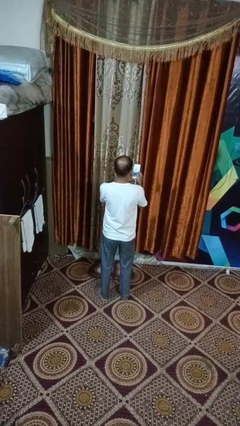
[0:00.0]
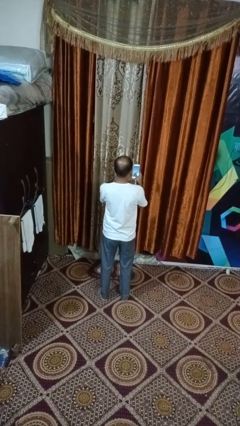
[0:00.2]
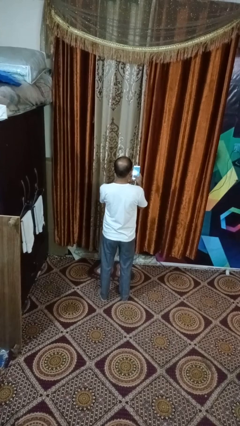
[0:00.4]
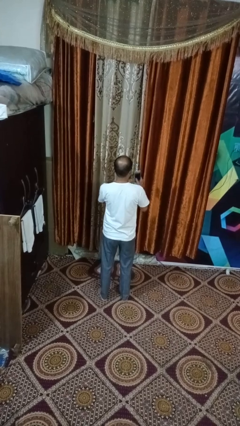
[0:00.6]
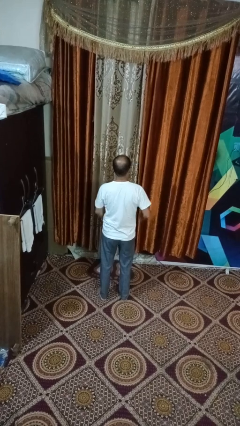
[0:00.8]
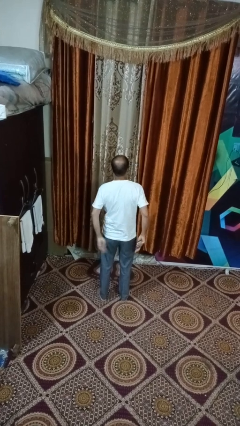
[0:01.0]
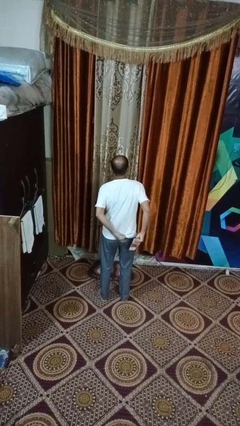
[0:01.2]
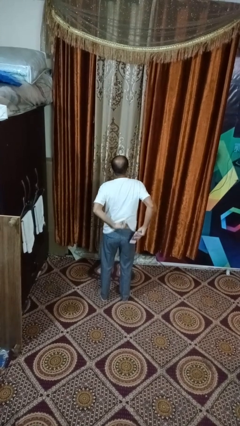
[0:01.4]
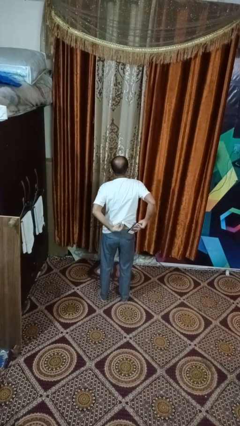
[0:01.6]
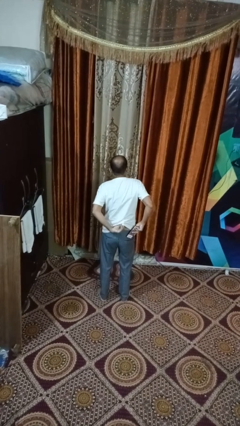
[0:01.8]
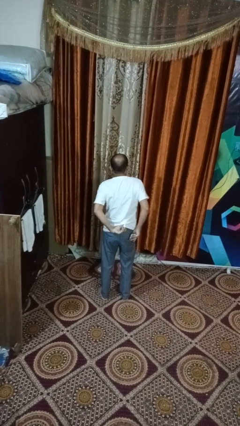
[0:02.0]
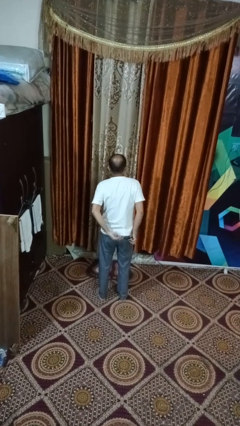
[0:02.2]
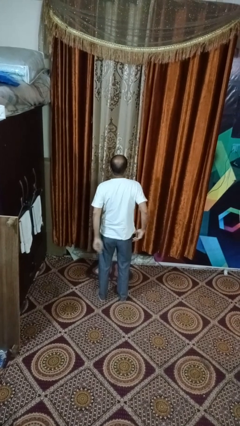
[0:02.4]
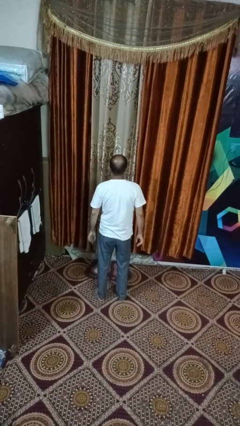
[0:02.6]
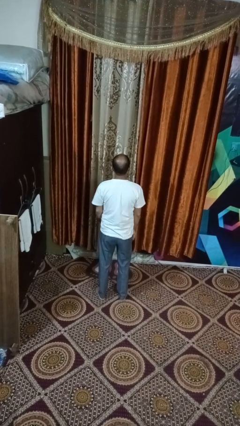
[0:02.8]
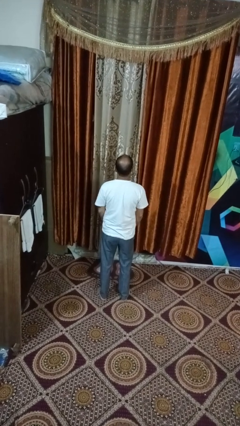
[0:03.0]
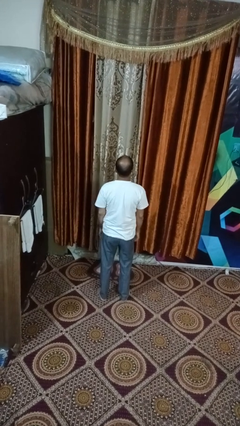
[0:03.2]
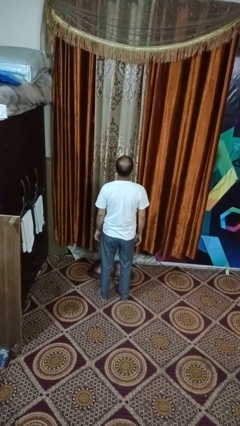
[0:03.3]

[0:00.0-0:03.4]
person puts phone into pocket

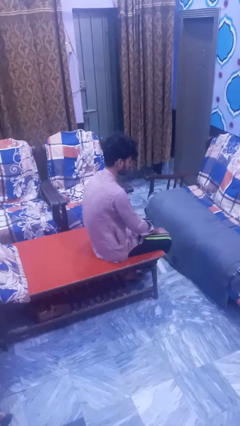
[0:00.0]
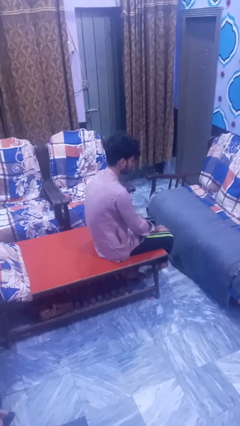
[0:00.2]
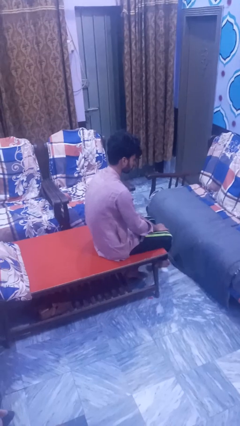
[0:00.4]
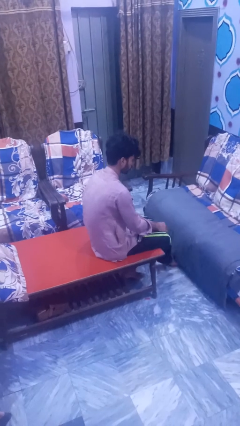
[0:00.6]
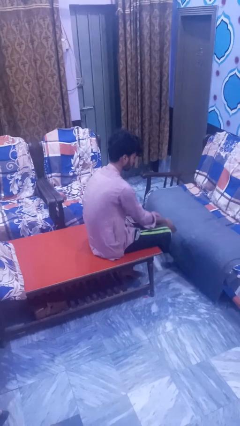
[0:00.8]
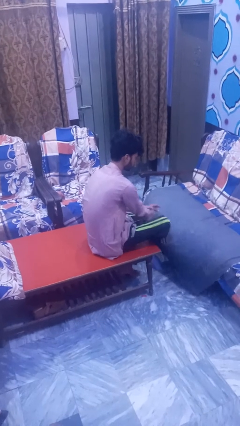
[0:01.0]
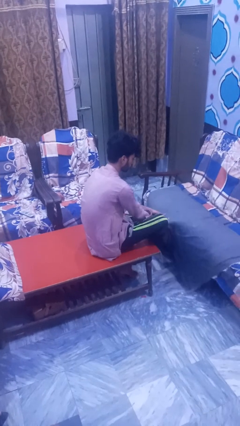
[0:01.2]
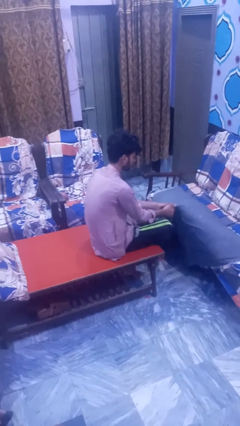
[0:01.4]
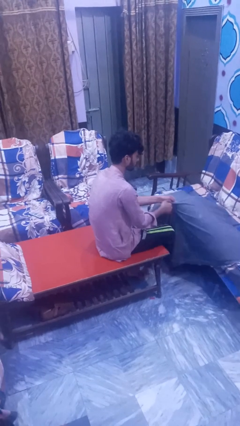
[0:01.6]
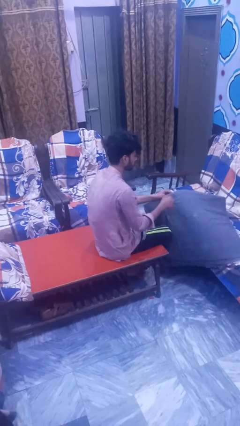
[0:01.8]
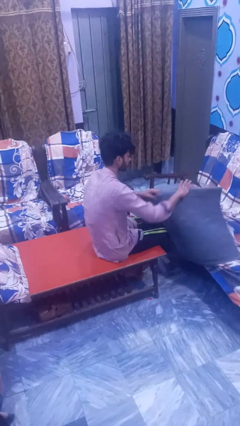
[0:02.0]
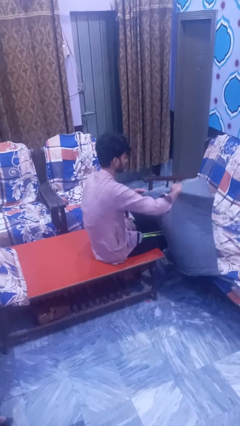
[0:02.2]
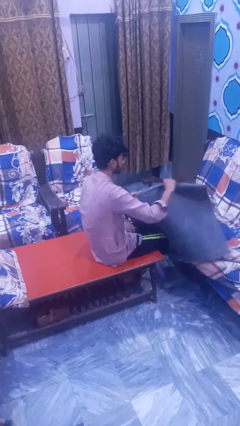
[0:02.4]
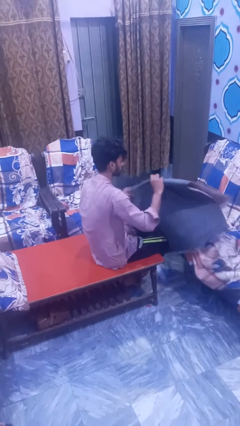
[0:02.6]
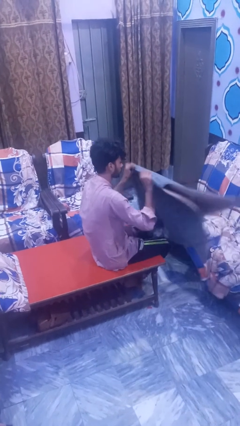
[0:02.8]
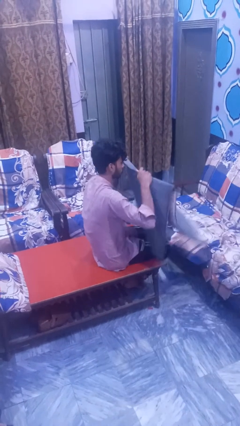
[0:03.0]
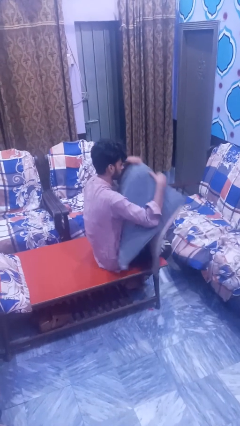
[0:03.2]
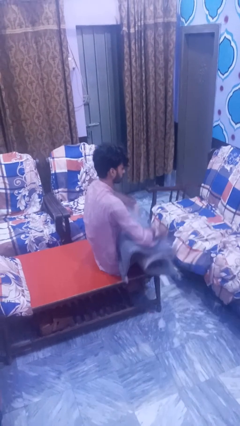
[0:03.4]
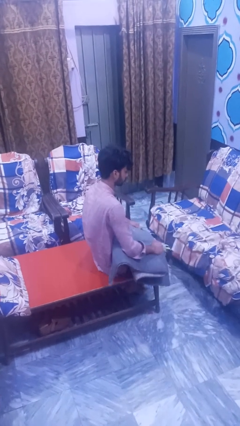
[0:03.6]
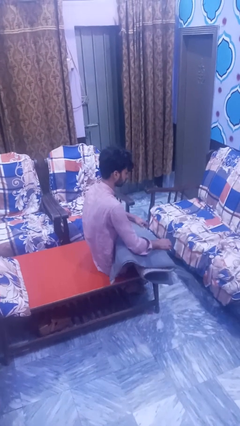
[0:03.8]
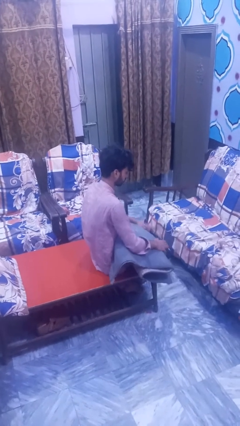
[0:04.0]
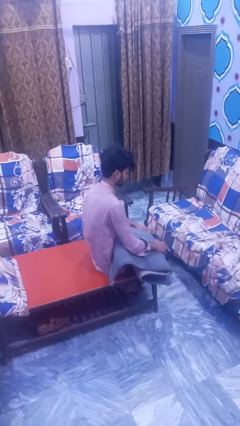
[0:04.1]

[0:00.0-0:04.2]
person folds blanket

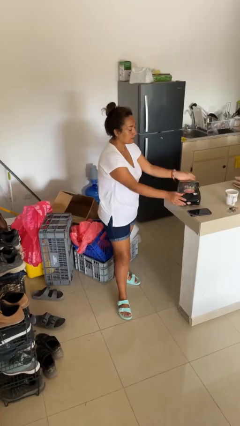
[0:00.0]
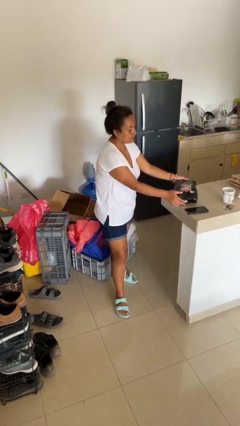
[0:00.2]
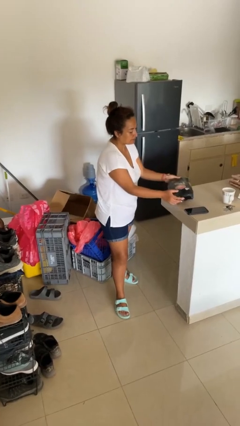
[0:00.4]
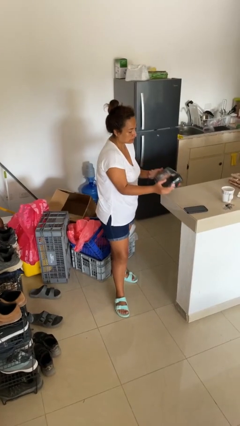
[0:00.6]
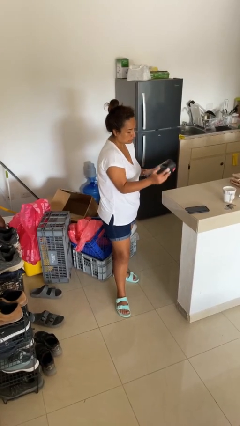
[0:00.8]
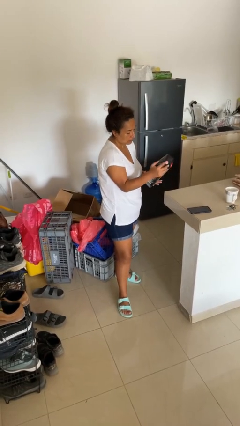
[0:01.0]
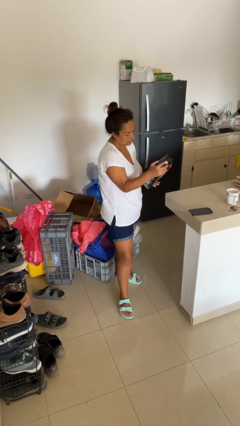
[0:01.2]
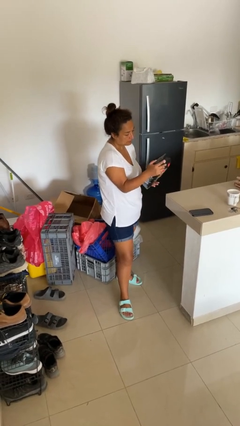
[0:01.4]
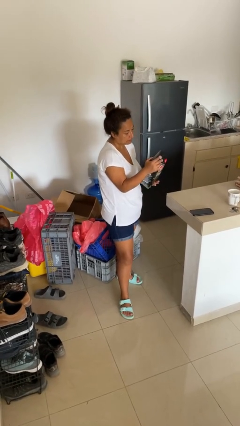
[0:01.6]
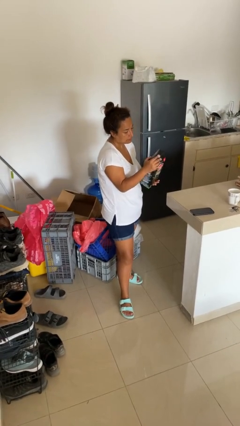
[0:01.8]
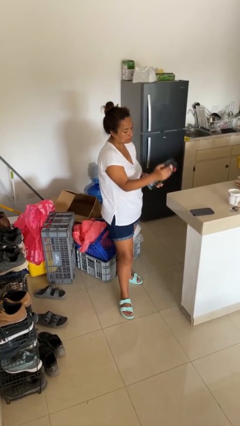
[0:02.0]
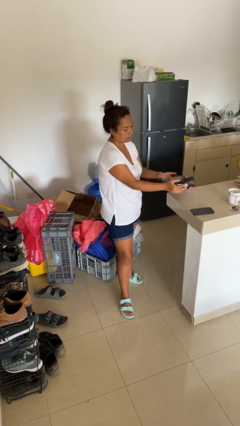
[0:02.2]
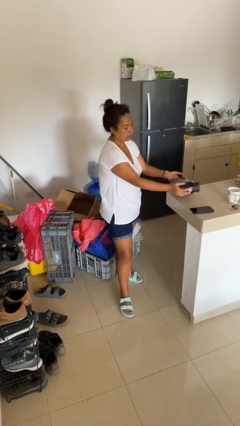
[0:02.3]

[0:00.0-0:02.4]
person picks up object from countertop

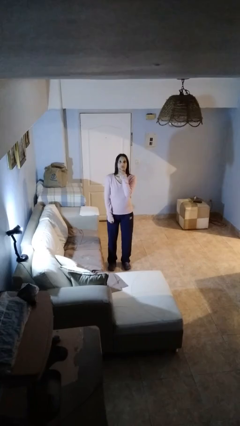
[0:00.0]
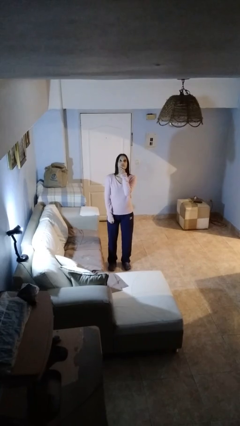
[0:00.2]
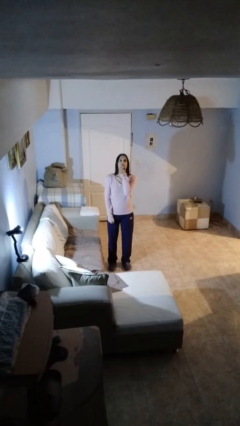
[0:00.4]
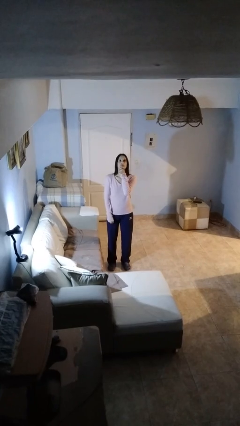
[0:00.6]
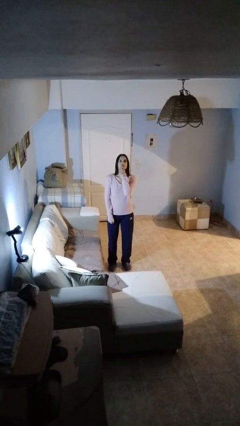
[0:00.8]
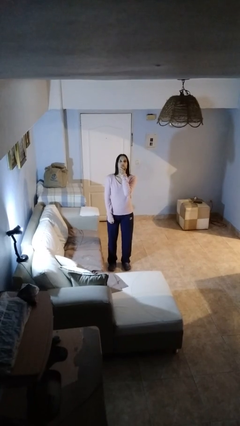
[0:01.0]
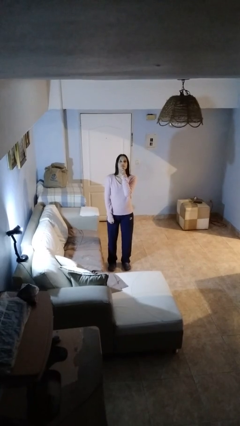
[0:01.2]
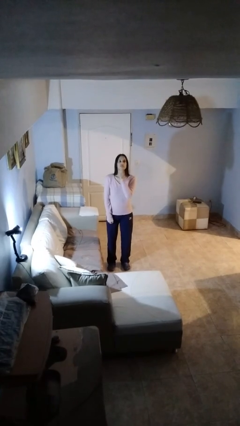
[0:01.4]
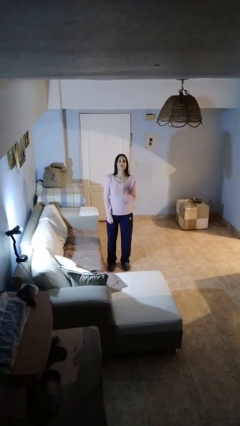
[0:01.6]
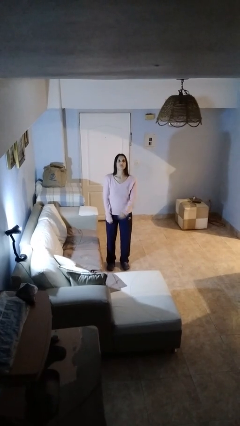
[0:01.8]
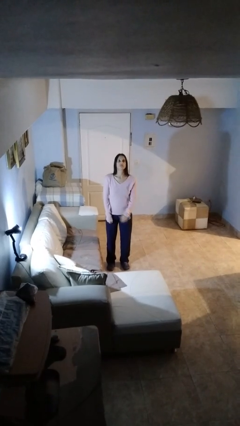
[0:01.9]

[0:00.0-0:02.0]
person strokes chin

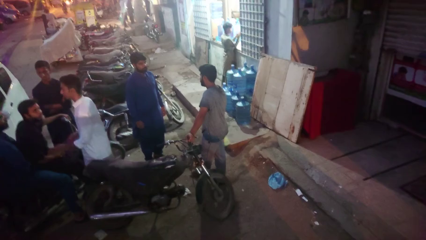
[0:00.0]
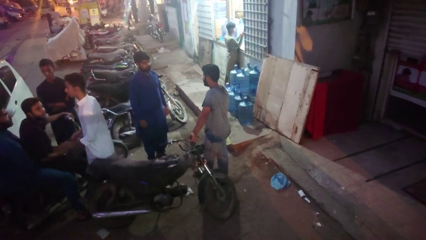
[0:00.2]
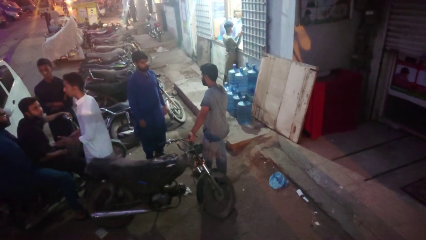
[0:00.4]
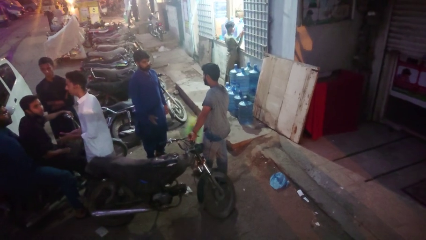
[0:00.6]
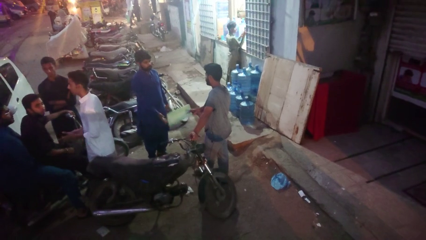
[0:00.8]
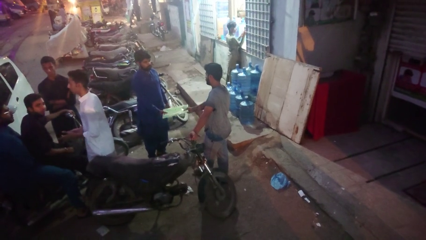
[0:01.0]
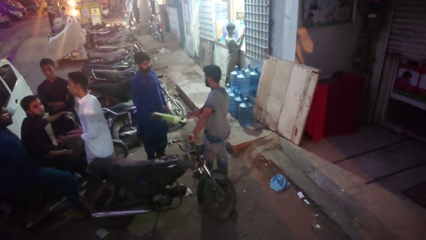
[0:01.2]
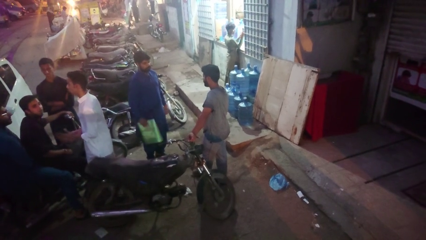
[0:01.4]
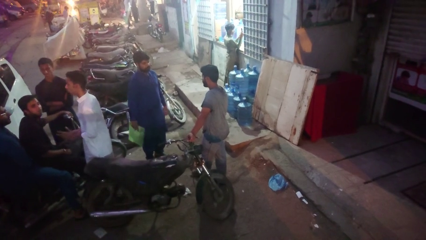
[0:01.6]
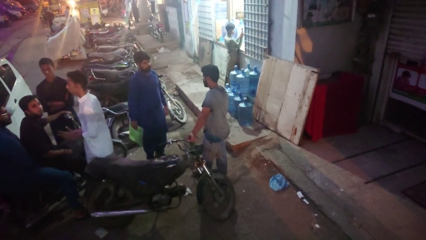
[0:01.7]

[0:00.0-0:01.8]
person transfers object to person

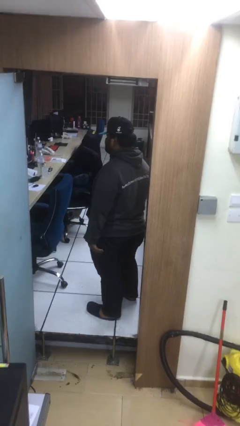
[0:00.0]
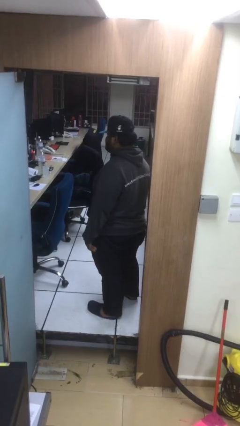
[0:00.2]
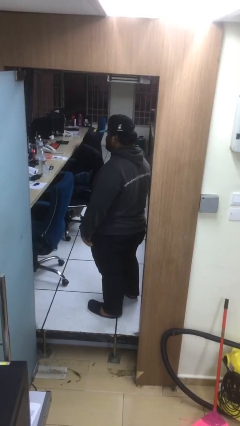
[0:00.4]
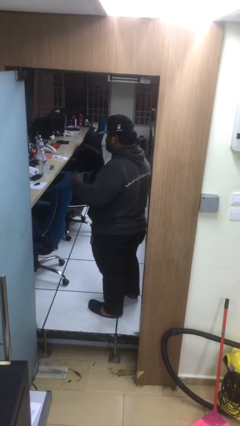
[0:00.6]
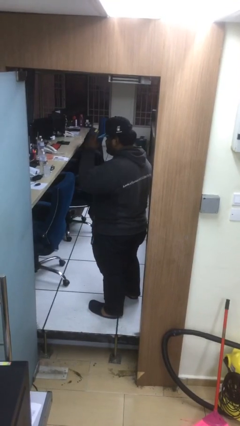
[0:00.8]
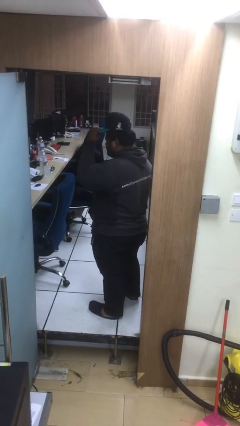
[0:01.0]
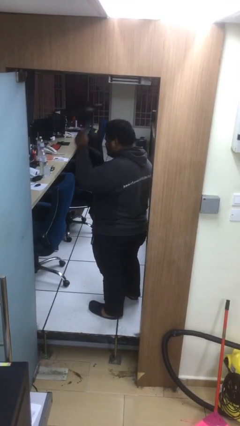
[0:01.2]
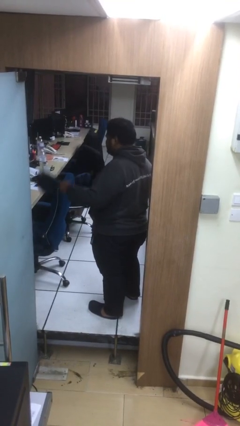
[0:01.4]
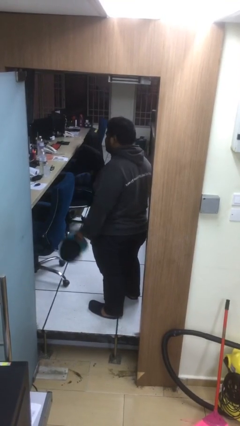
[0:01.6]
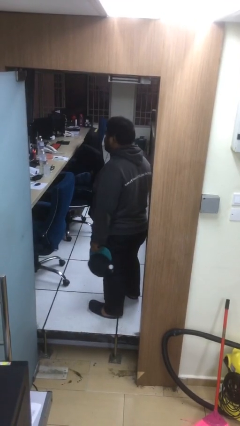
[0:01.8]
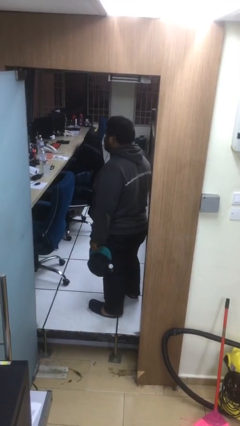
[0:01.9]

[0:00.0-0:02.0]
person takes off hat

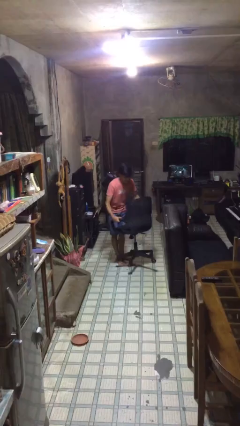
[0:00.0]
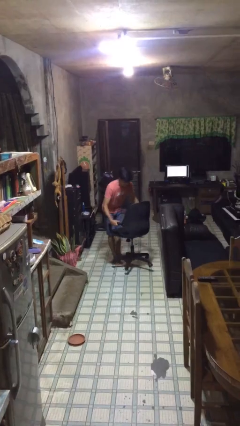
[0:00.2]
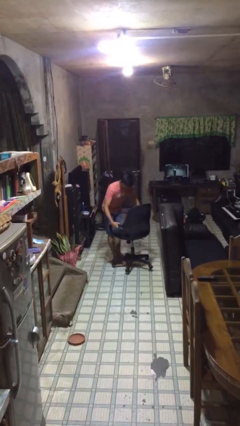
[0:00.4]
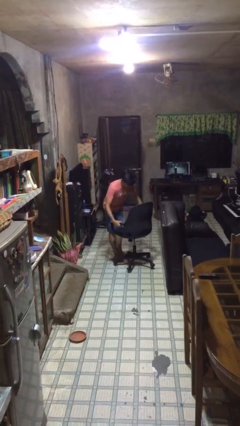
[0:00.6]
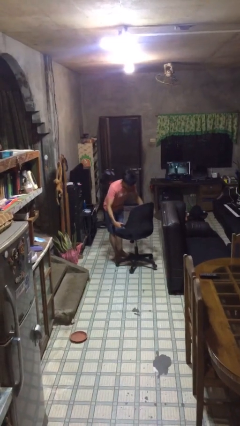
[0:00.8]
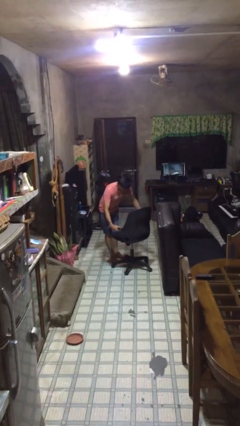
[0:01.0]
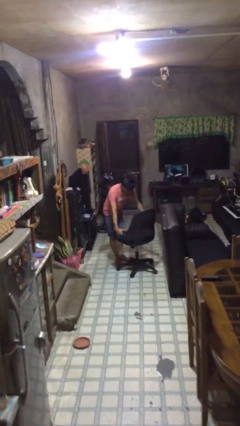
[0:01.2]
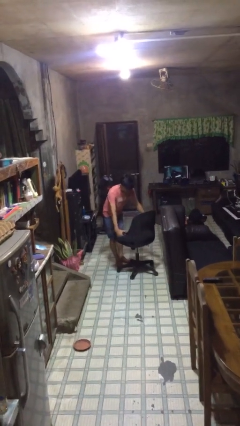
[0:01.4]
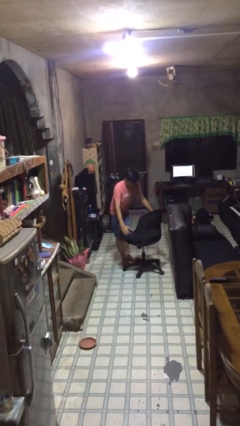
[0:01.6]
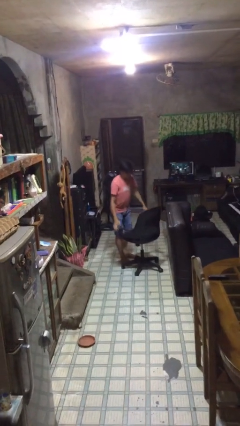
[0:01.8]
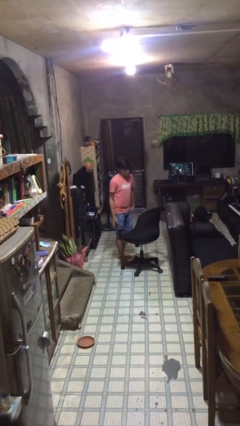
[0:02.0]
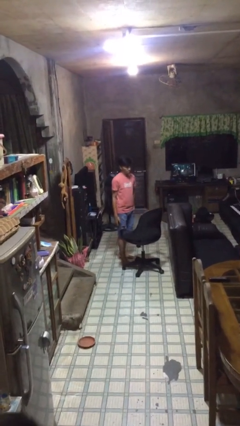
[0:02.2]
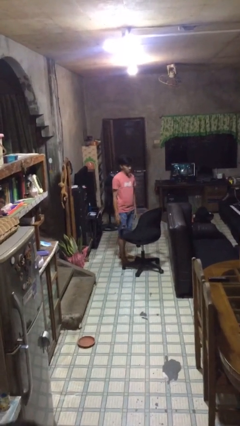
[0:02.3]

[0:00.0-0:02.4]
person puts down object on floor
